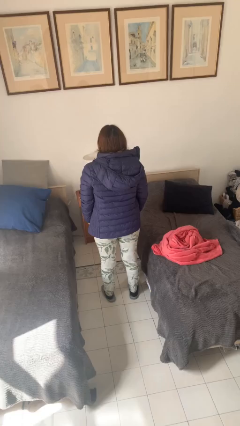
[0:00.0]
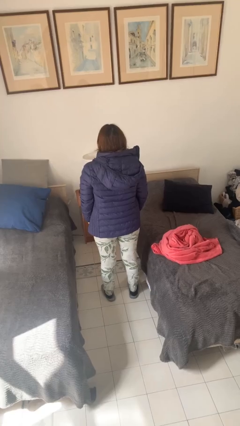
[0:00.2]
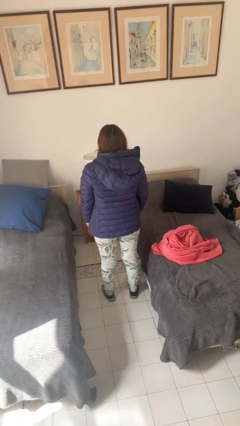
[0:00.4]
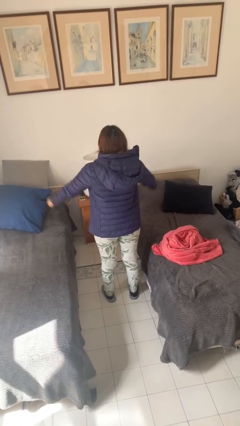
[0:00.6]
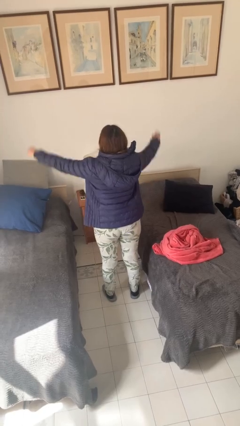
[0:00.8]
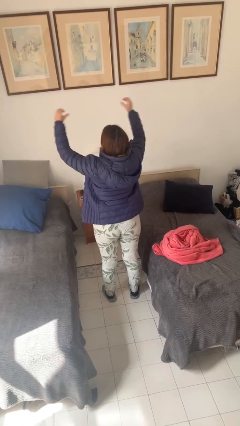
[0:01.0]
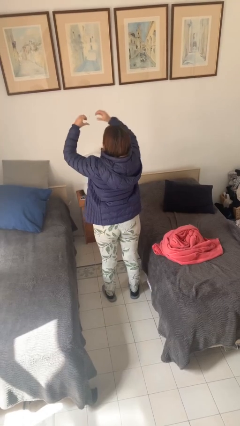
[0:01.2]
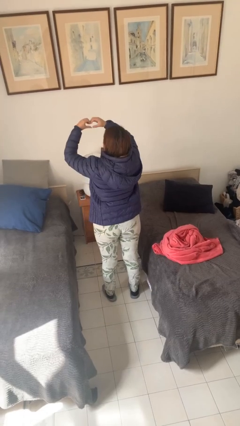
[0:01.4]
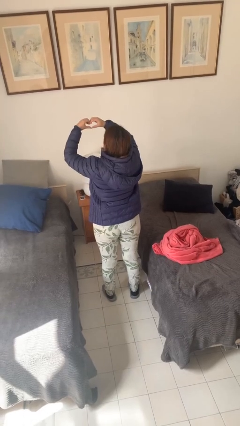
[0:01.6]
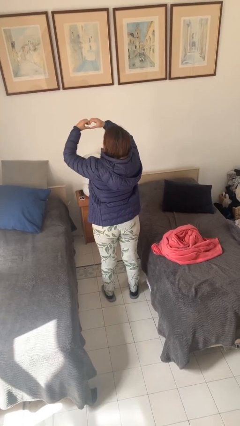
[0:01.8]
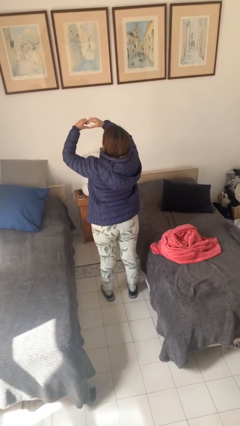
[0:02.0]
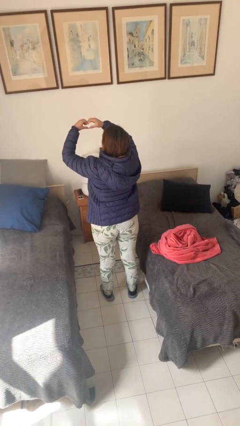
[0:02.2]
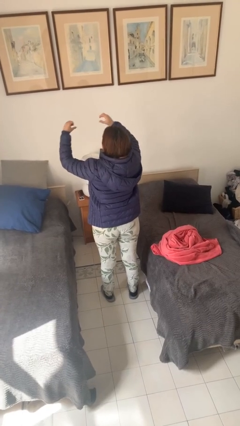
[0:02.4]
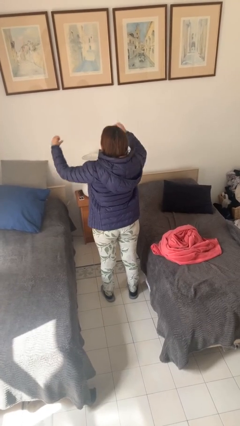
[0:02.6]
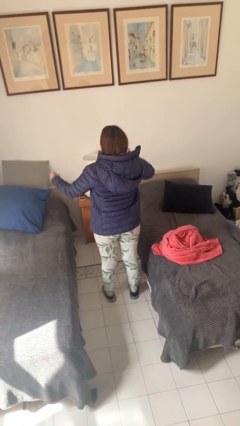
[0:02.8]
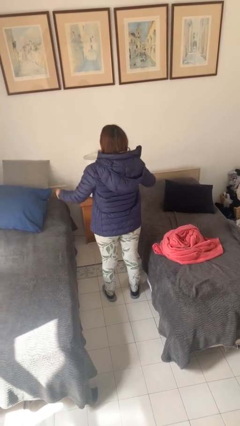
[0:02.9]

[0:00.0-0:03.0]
person gestures heart

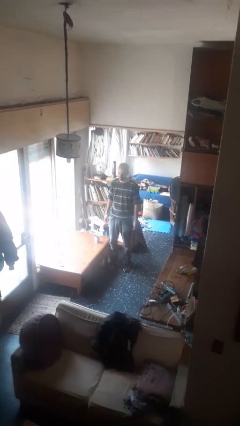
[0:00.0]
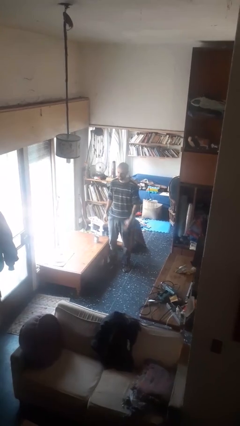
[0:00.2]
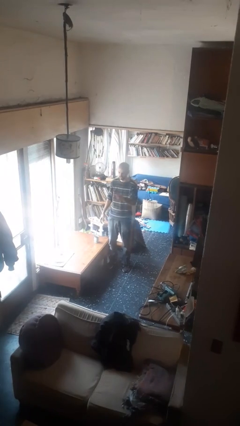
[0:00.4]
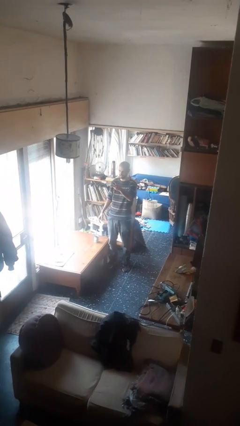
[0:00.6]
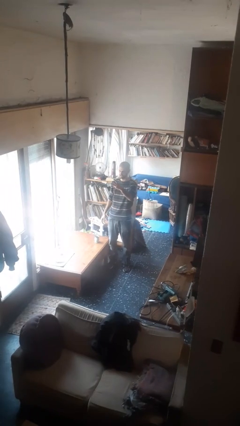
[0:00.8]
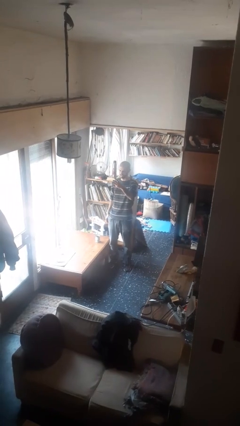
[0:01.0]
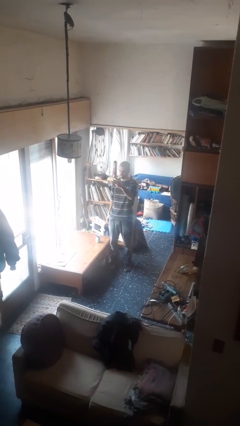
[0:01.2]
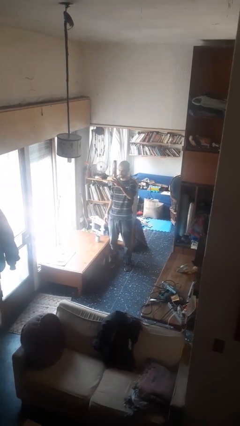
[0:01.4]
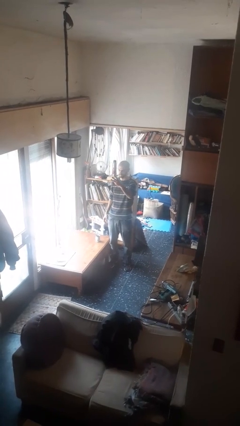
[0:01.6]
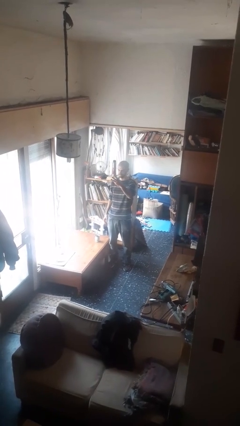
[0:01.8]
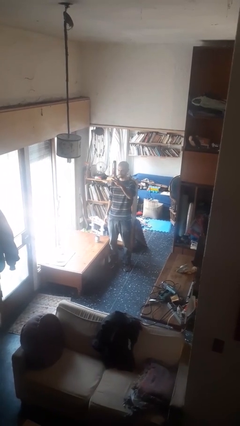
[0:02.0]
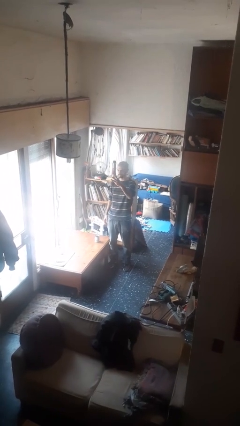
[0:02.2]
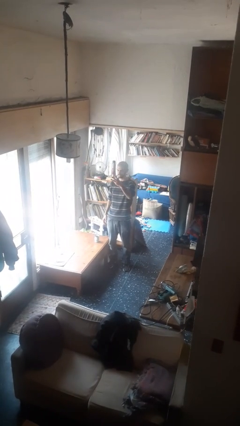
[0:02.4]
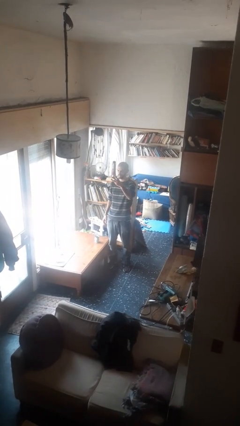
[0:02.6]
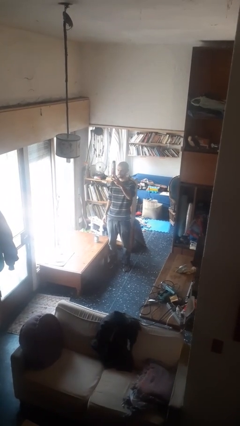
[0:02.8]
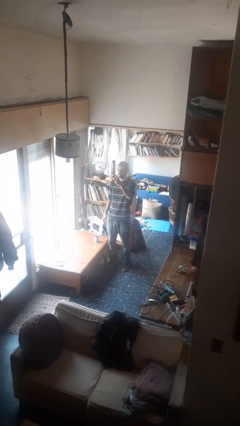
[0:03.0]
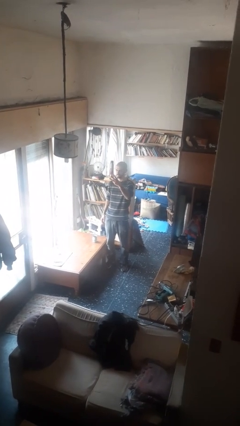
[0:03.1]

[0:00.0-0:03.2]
person gestures number three

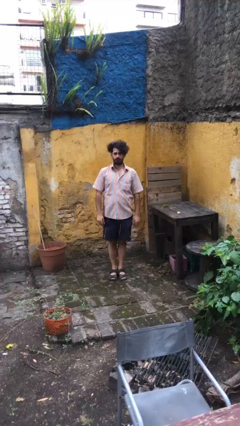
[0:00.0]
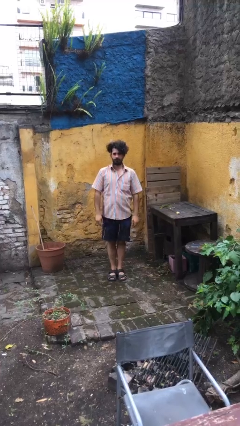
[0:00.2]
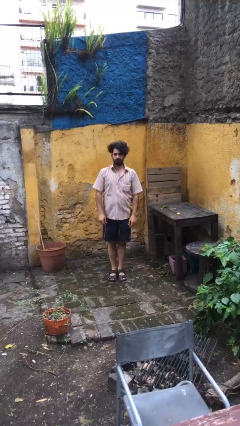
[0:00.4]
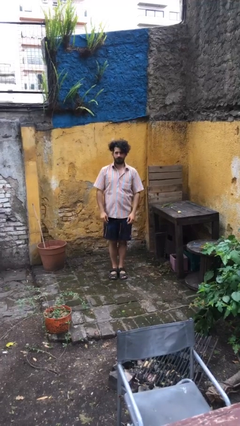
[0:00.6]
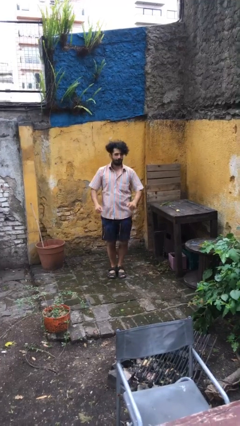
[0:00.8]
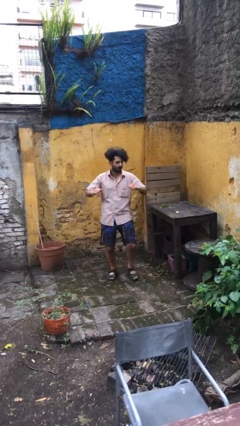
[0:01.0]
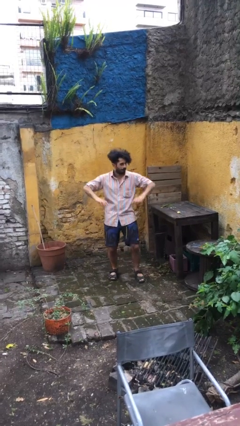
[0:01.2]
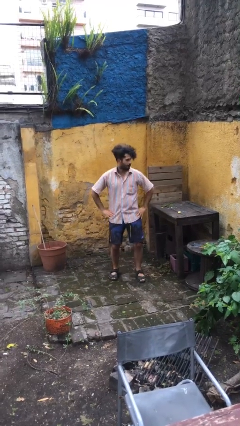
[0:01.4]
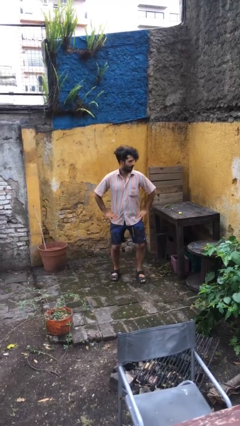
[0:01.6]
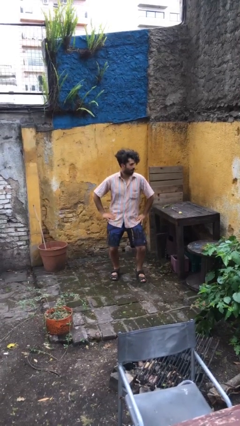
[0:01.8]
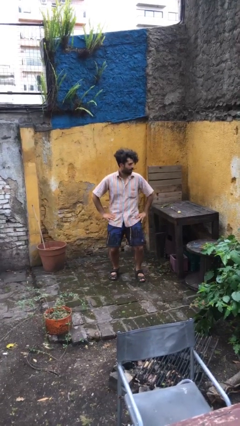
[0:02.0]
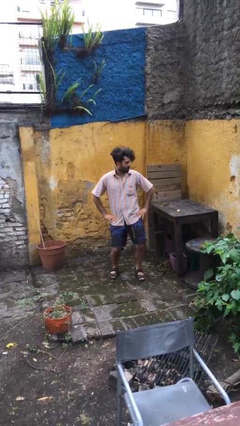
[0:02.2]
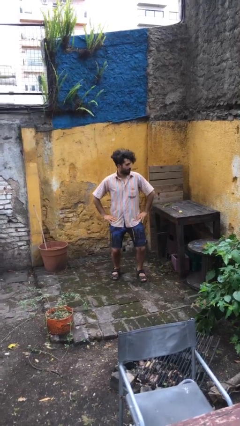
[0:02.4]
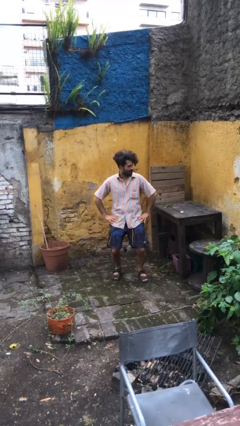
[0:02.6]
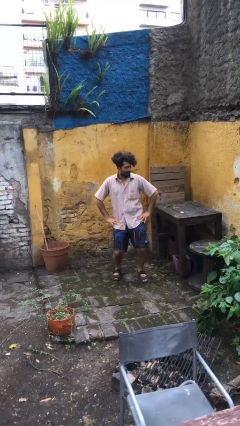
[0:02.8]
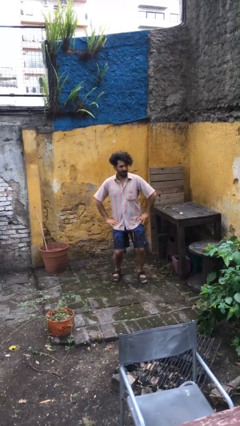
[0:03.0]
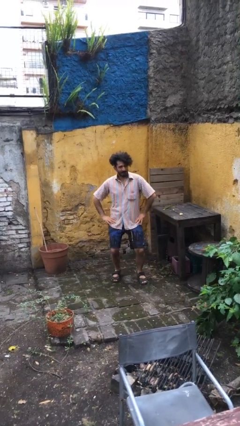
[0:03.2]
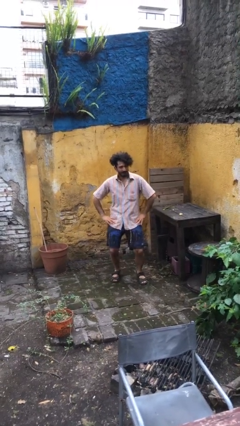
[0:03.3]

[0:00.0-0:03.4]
person dances in place

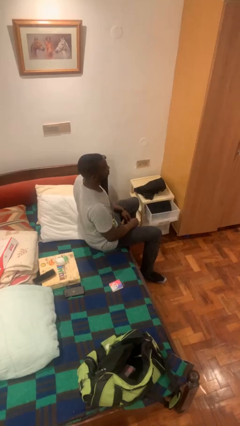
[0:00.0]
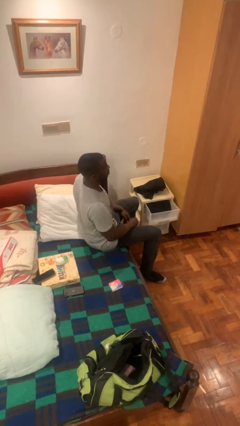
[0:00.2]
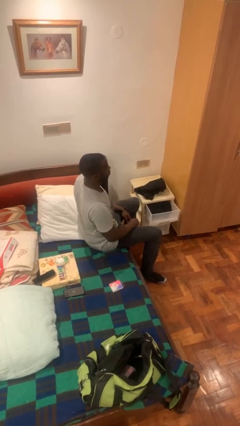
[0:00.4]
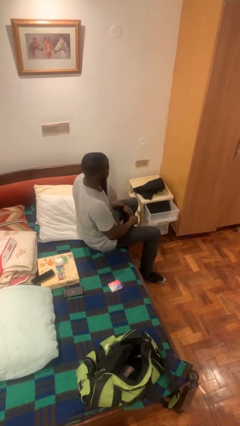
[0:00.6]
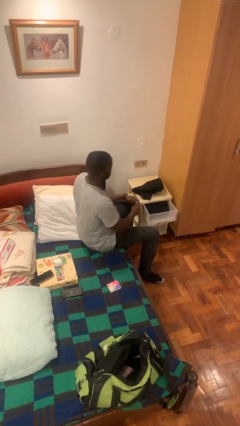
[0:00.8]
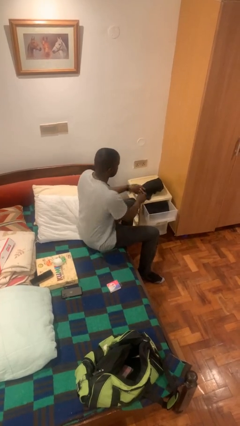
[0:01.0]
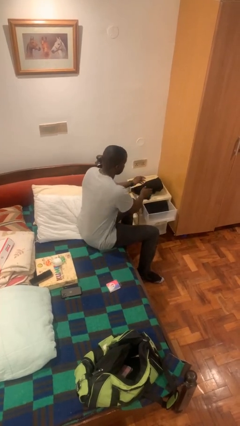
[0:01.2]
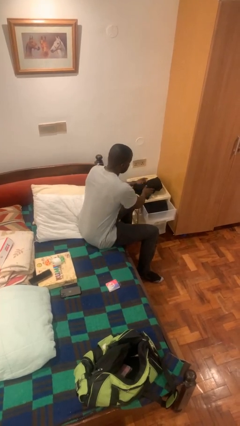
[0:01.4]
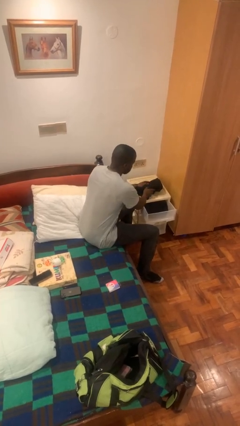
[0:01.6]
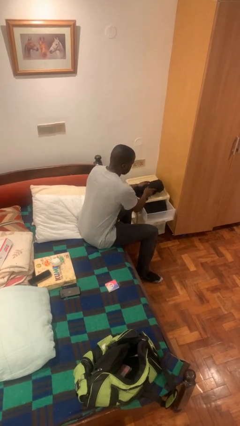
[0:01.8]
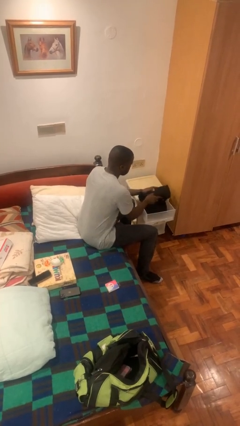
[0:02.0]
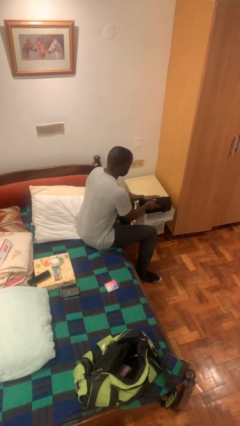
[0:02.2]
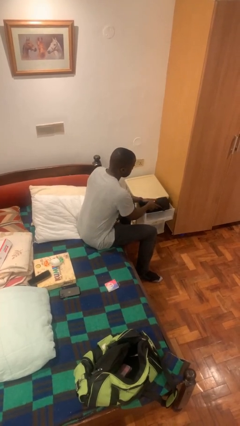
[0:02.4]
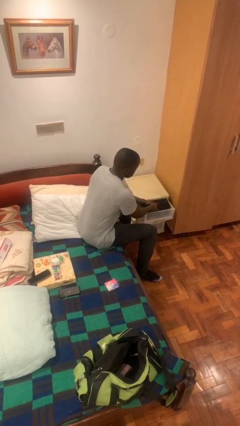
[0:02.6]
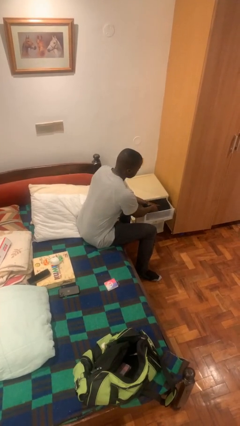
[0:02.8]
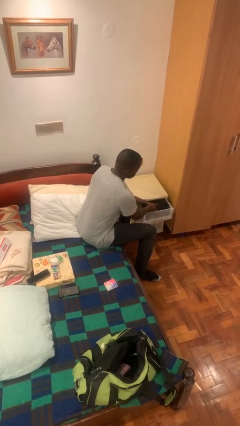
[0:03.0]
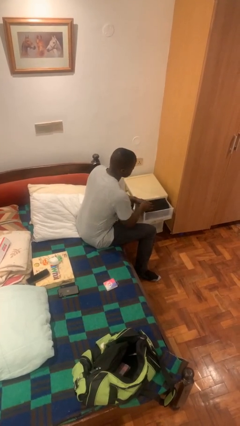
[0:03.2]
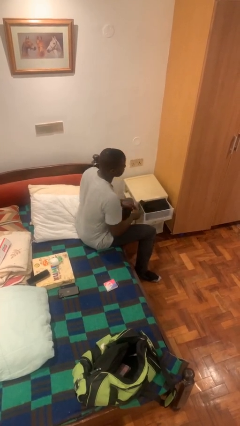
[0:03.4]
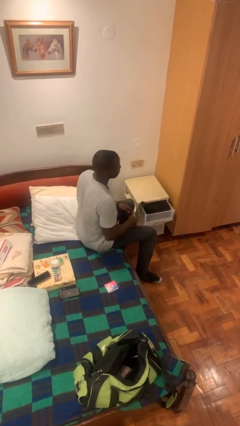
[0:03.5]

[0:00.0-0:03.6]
person puts clothes into dresser

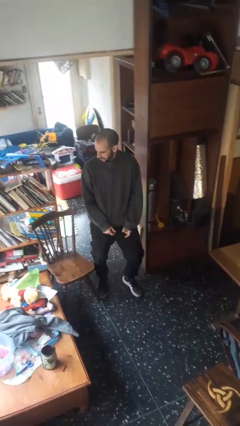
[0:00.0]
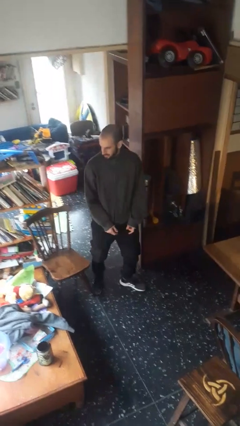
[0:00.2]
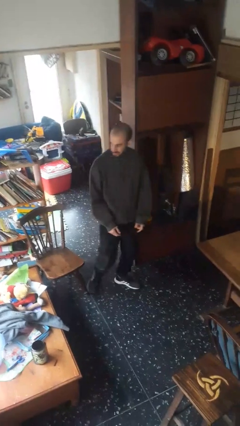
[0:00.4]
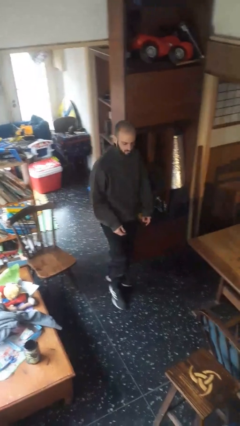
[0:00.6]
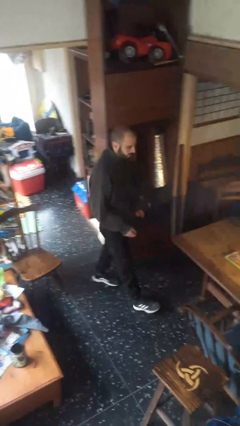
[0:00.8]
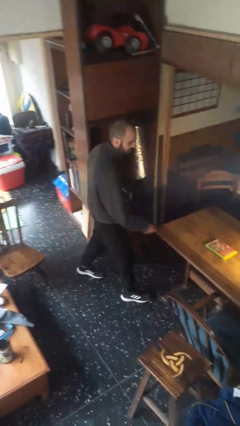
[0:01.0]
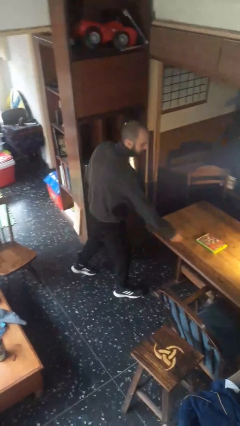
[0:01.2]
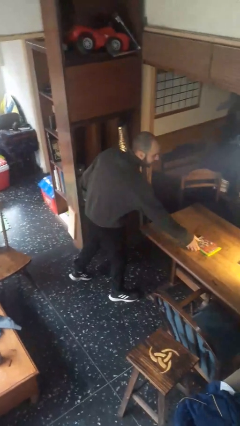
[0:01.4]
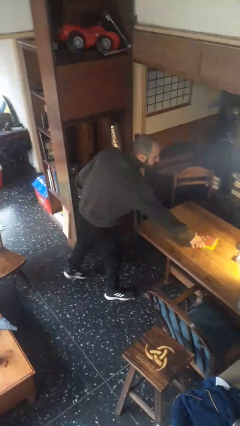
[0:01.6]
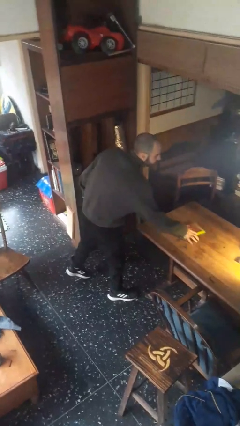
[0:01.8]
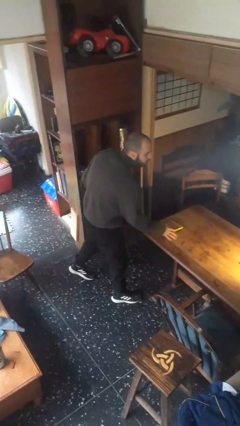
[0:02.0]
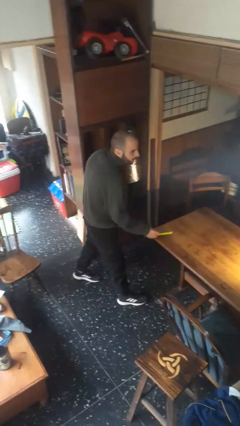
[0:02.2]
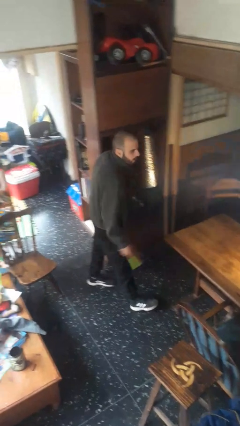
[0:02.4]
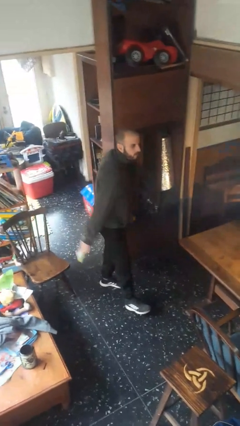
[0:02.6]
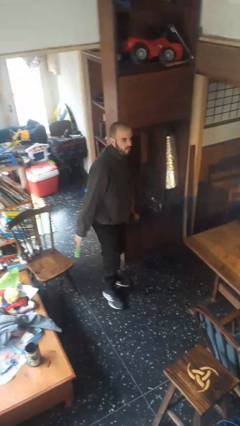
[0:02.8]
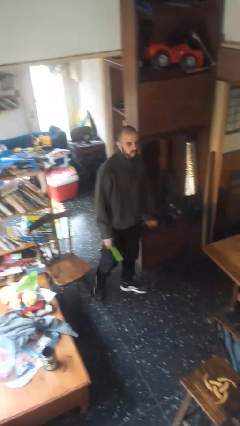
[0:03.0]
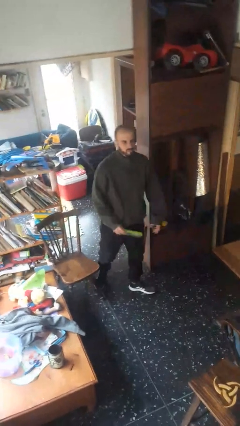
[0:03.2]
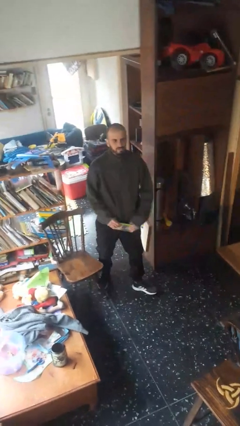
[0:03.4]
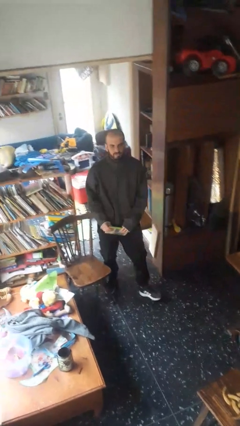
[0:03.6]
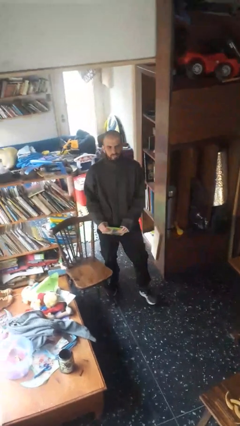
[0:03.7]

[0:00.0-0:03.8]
person picks up object from table

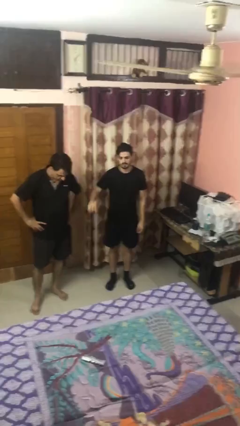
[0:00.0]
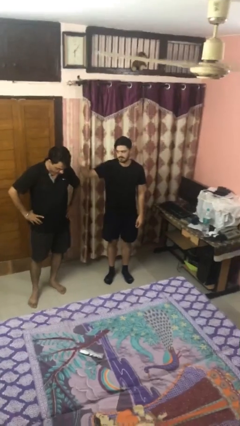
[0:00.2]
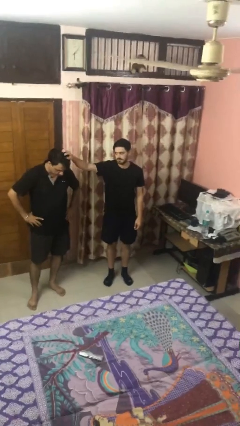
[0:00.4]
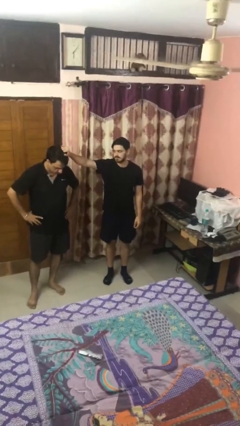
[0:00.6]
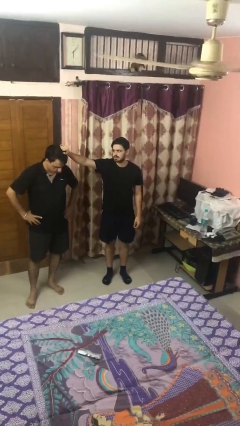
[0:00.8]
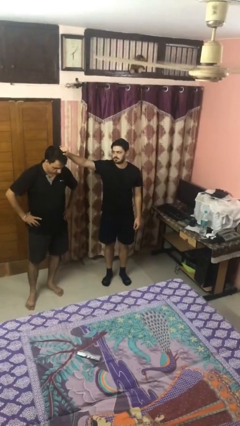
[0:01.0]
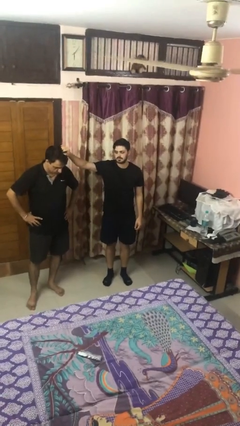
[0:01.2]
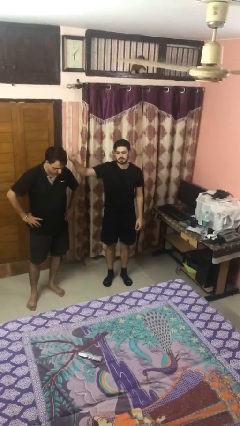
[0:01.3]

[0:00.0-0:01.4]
person grabs person by hair
